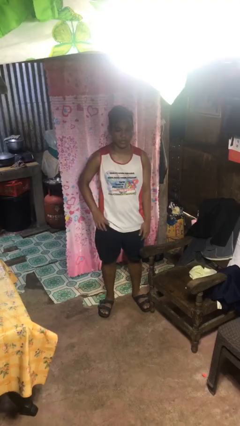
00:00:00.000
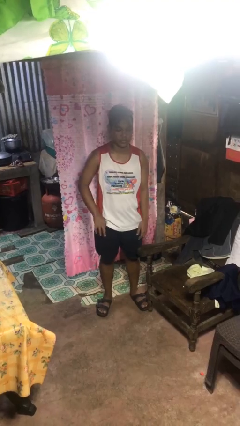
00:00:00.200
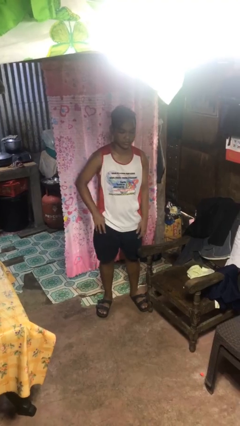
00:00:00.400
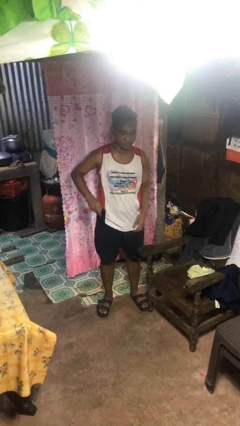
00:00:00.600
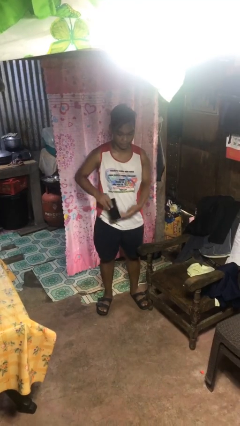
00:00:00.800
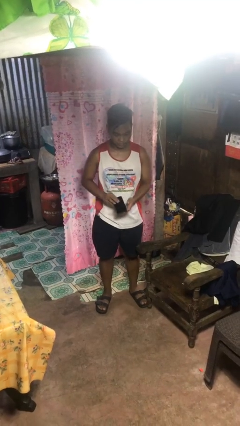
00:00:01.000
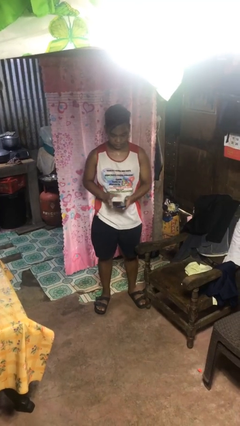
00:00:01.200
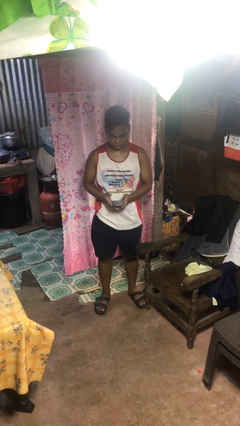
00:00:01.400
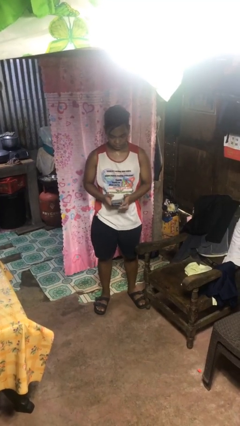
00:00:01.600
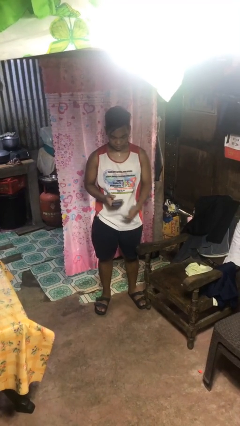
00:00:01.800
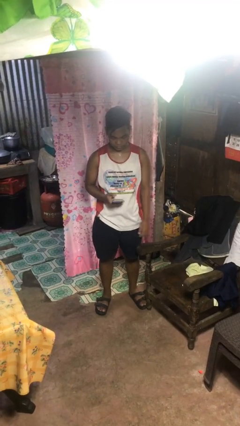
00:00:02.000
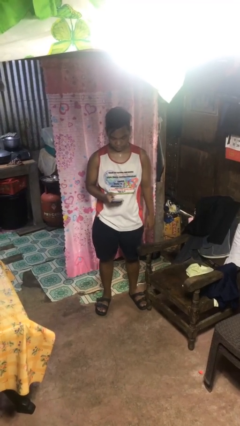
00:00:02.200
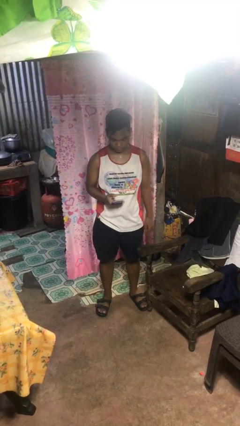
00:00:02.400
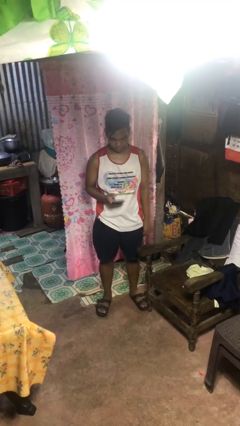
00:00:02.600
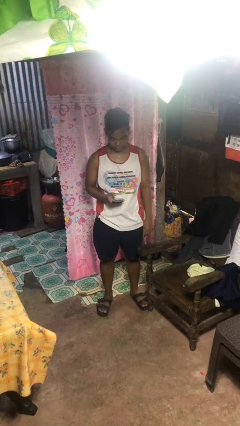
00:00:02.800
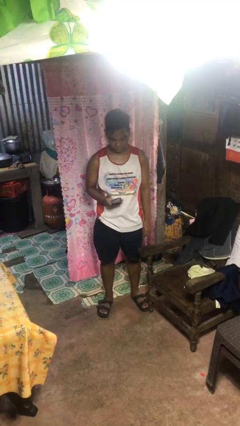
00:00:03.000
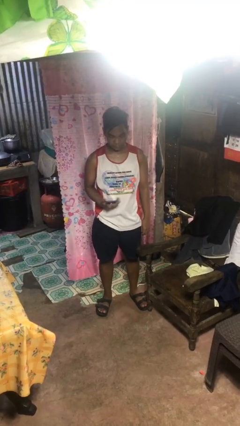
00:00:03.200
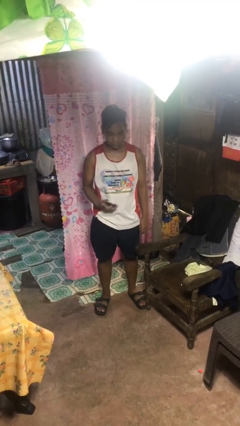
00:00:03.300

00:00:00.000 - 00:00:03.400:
person takes phone from pocket

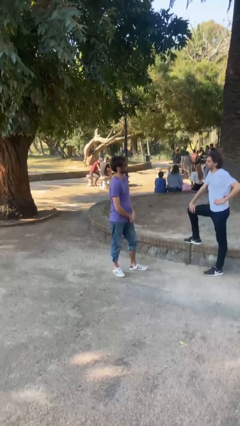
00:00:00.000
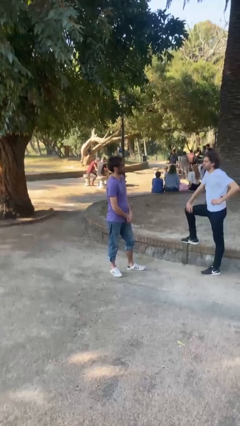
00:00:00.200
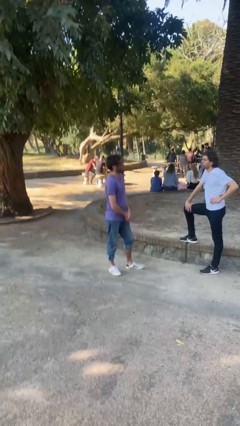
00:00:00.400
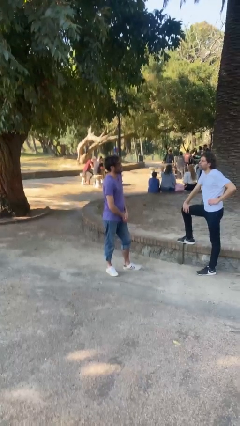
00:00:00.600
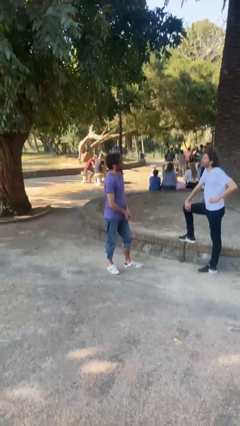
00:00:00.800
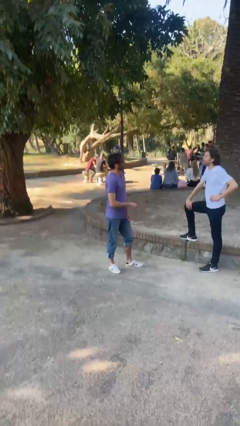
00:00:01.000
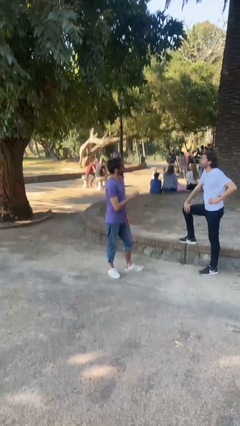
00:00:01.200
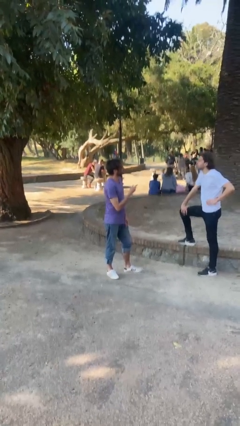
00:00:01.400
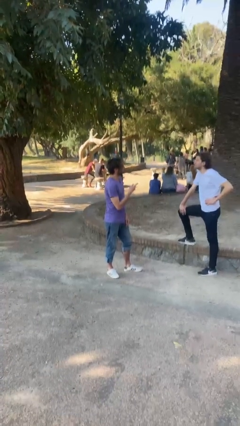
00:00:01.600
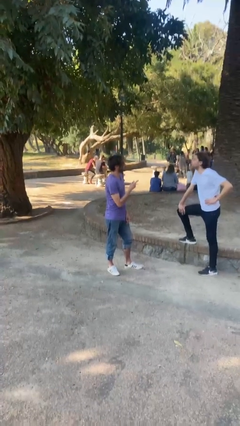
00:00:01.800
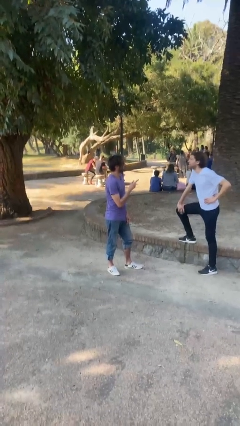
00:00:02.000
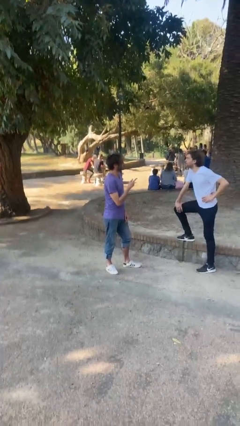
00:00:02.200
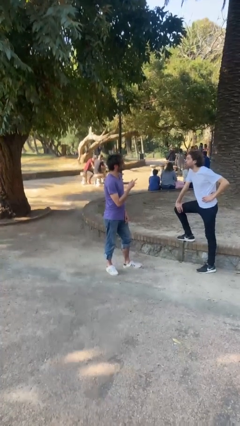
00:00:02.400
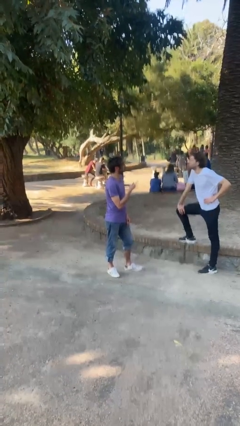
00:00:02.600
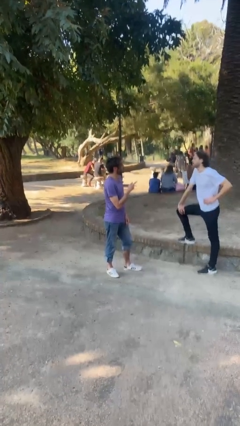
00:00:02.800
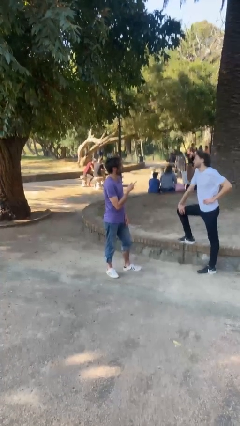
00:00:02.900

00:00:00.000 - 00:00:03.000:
person talks to person

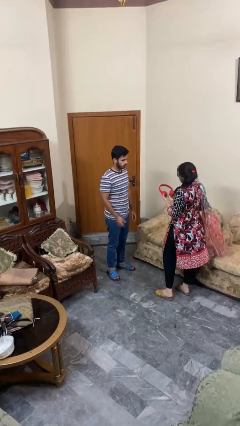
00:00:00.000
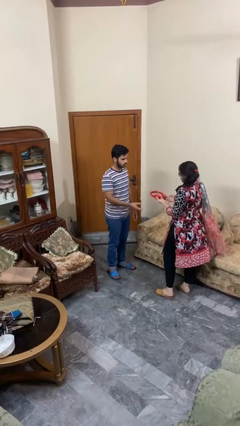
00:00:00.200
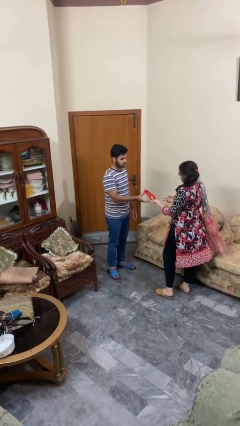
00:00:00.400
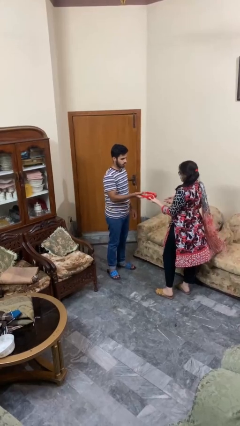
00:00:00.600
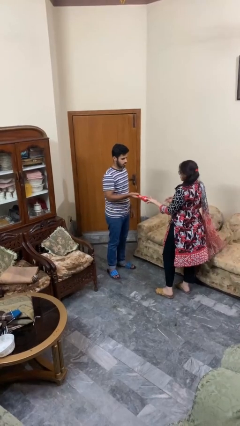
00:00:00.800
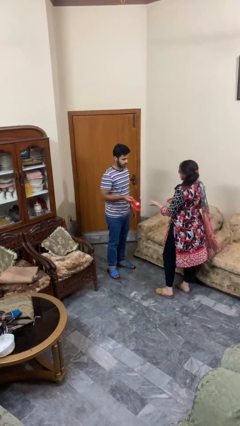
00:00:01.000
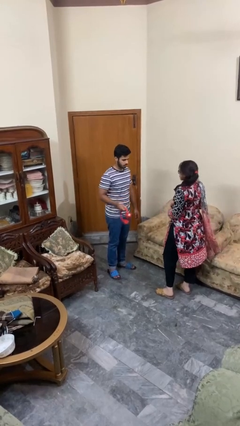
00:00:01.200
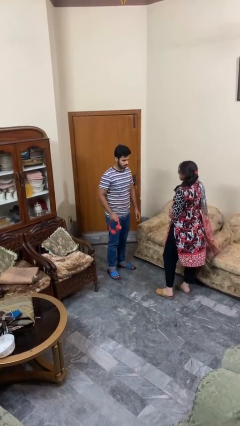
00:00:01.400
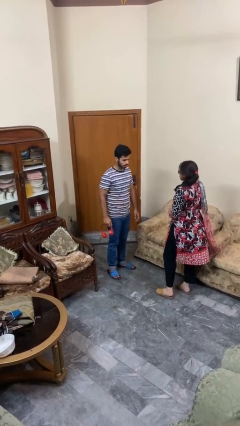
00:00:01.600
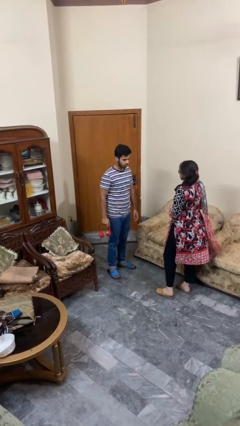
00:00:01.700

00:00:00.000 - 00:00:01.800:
person transfers object to person

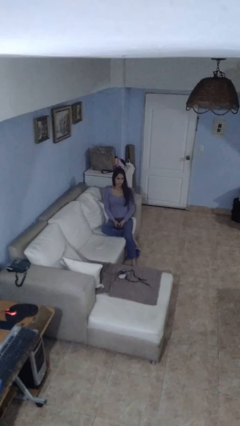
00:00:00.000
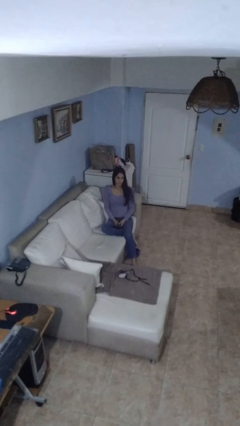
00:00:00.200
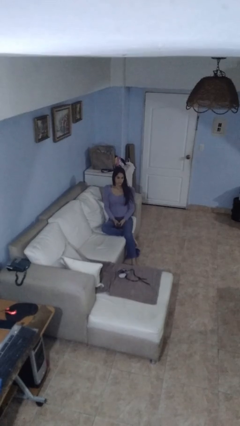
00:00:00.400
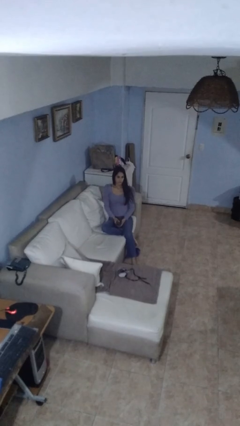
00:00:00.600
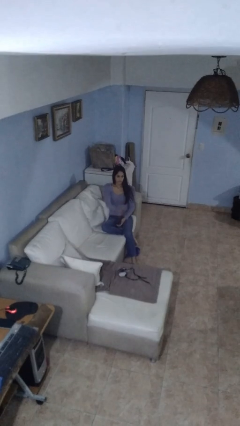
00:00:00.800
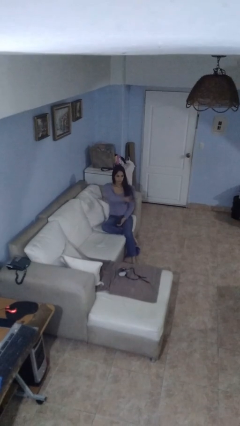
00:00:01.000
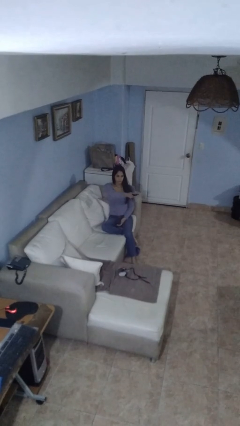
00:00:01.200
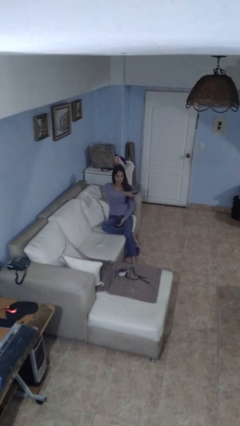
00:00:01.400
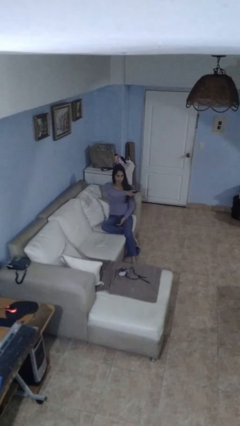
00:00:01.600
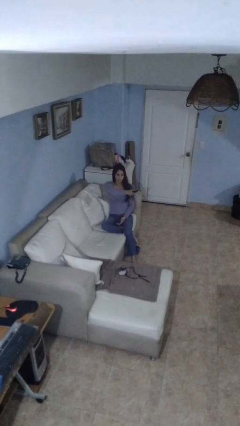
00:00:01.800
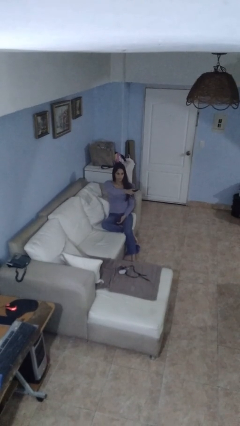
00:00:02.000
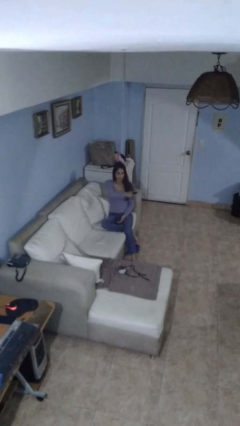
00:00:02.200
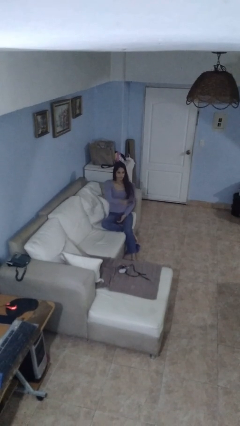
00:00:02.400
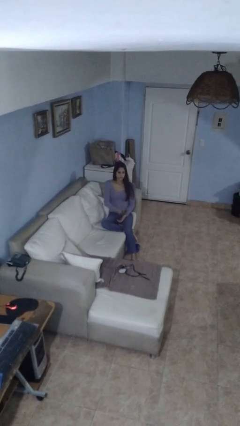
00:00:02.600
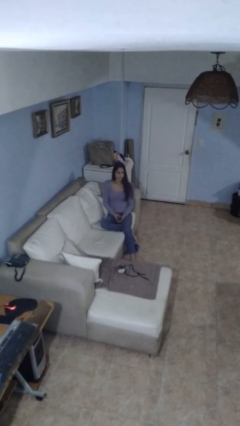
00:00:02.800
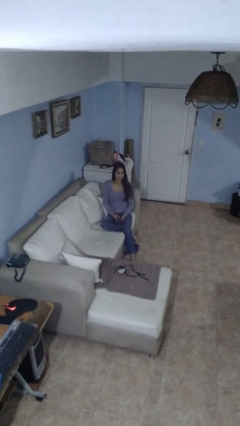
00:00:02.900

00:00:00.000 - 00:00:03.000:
person uses television remote

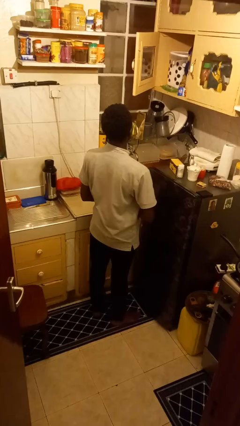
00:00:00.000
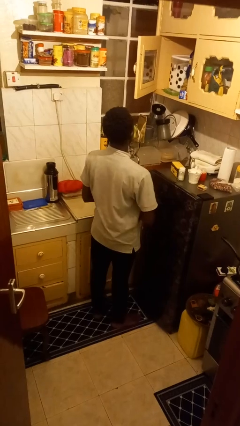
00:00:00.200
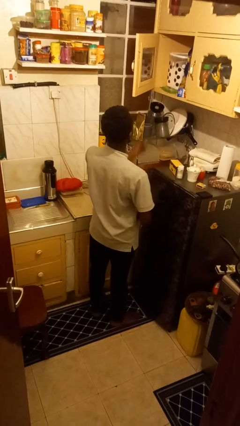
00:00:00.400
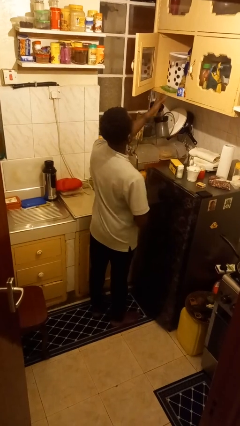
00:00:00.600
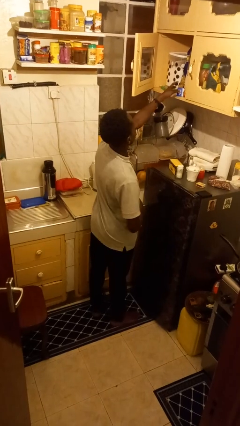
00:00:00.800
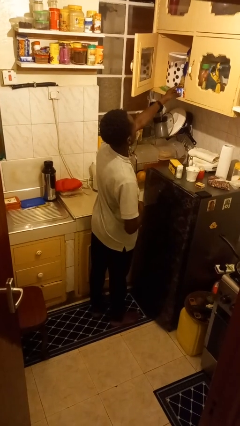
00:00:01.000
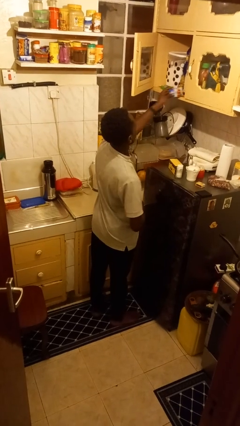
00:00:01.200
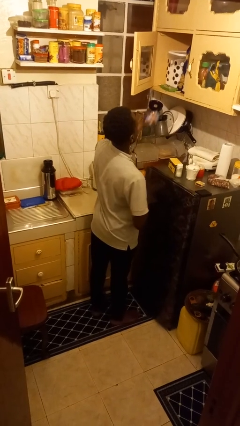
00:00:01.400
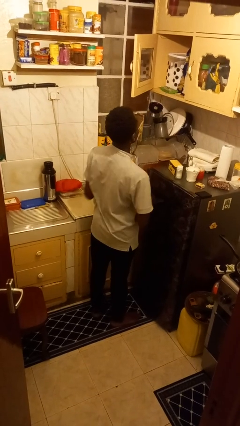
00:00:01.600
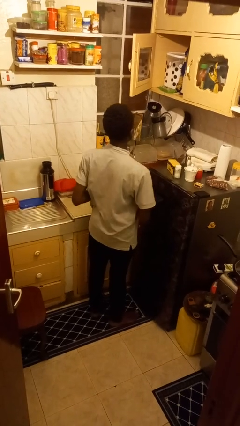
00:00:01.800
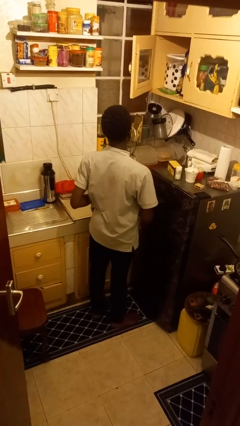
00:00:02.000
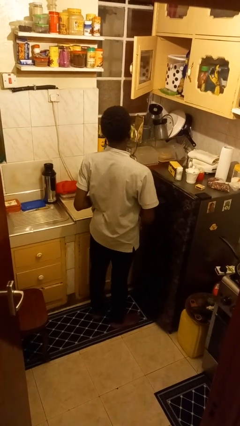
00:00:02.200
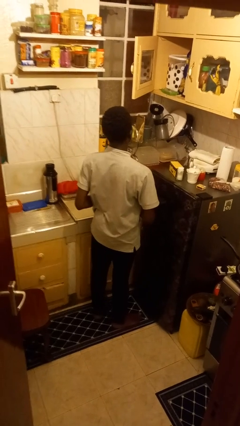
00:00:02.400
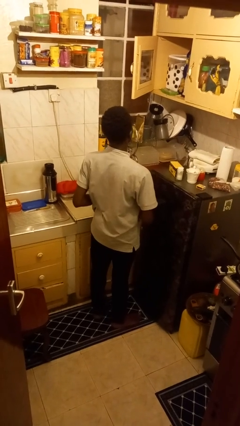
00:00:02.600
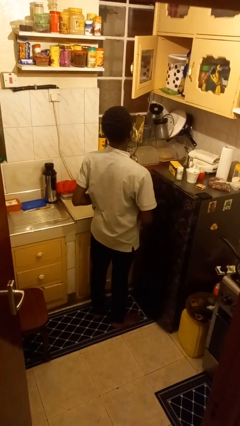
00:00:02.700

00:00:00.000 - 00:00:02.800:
person picks up object from cabinet

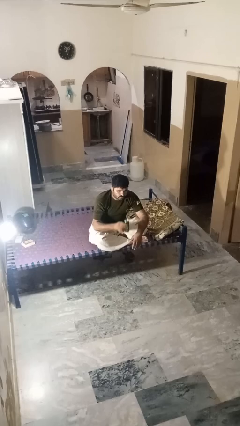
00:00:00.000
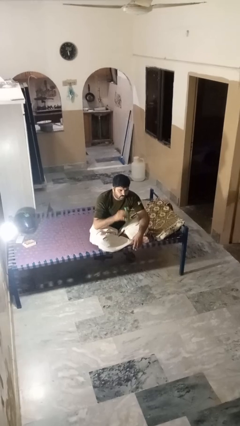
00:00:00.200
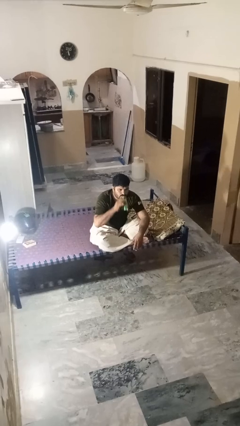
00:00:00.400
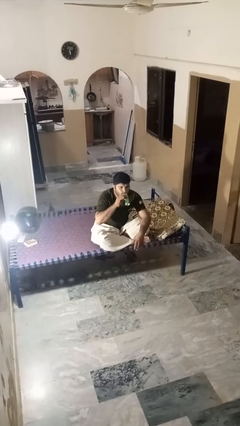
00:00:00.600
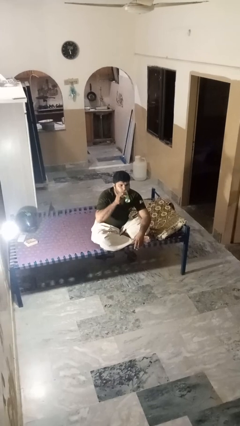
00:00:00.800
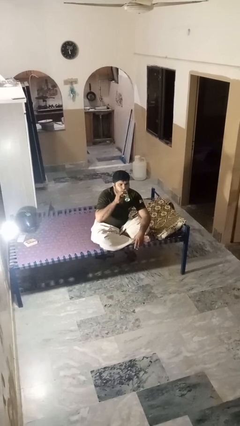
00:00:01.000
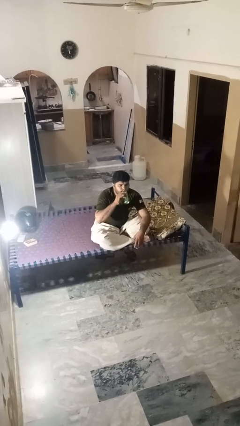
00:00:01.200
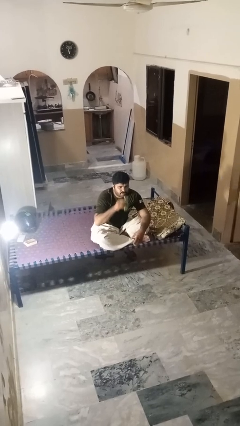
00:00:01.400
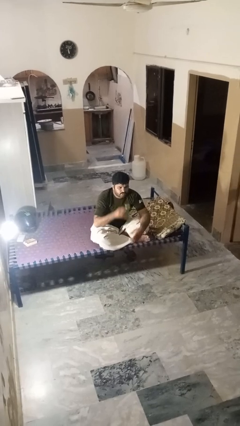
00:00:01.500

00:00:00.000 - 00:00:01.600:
person drinks from beverage can

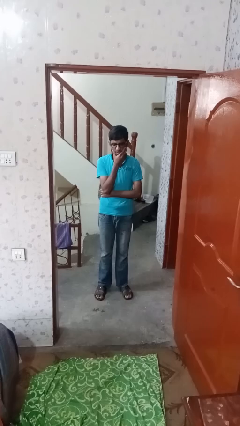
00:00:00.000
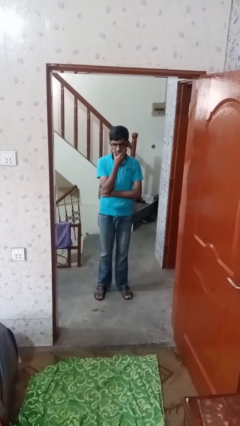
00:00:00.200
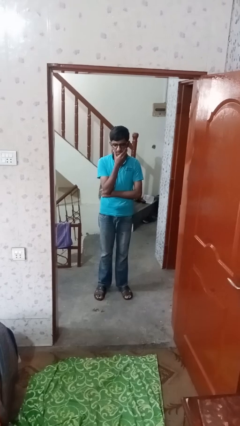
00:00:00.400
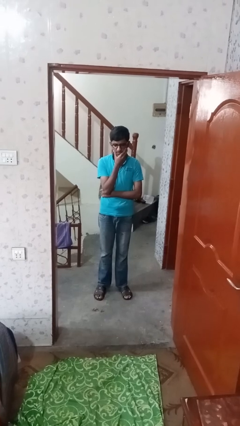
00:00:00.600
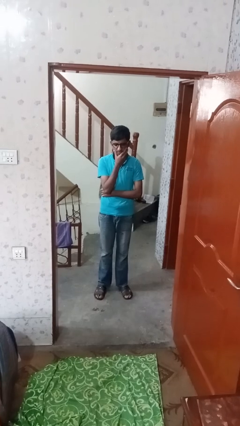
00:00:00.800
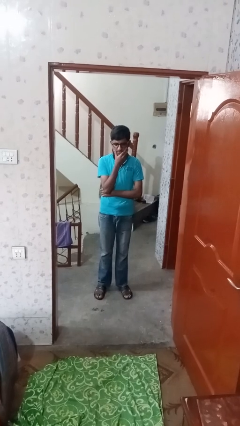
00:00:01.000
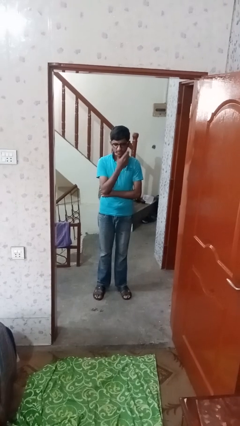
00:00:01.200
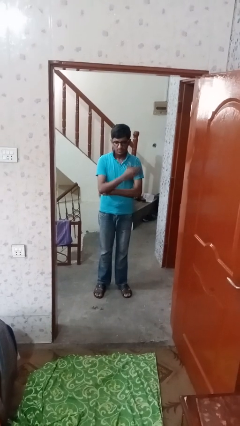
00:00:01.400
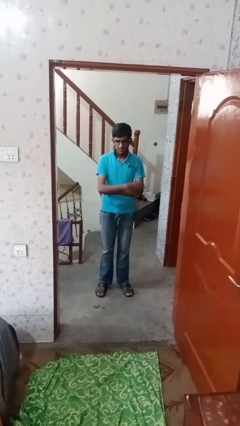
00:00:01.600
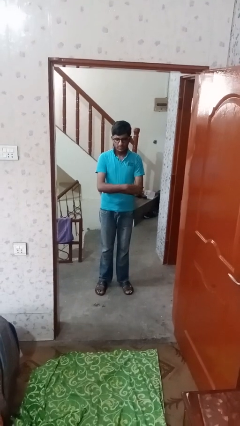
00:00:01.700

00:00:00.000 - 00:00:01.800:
person strokes chin
